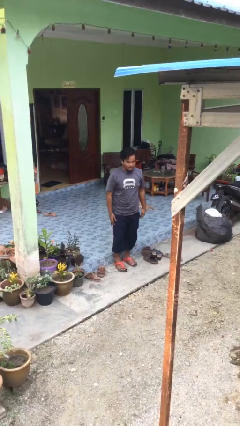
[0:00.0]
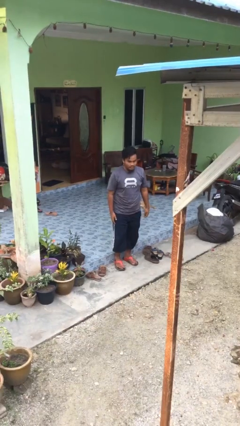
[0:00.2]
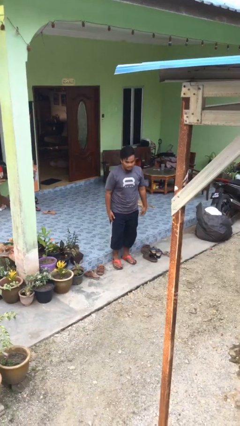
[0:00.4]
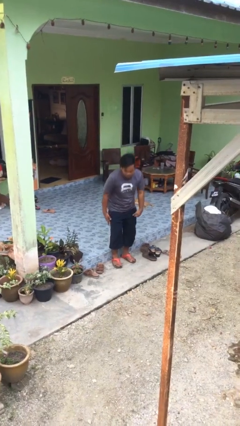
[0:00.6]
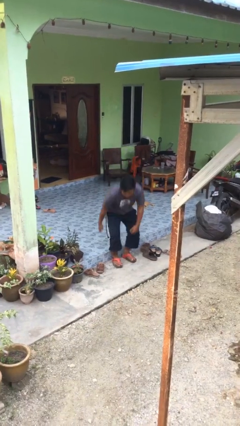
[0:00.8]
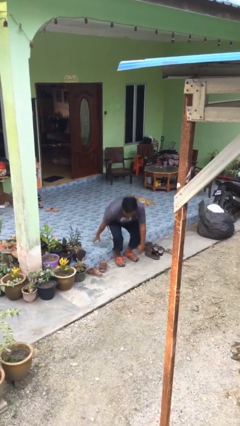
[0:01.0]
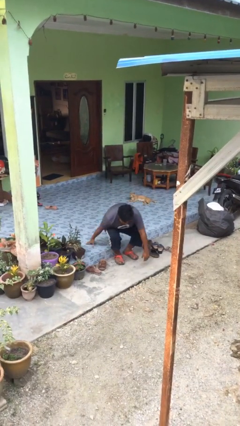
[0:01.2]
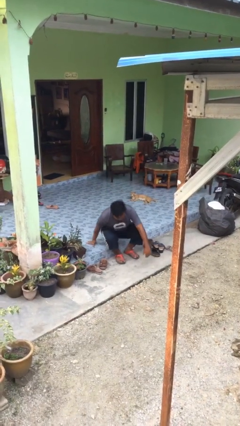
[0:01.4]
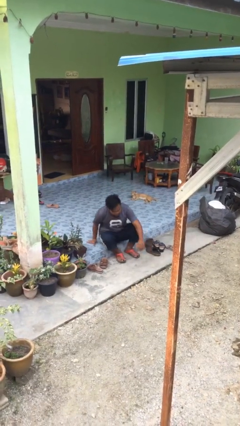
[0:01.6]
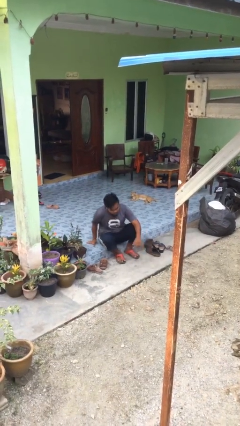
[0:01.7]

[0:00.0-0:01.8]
person sits down

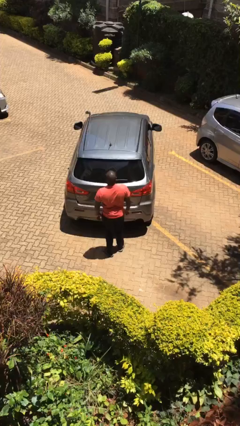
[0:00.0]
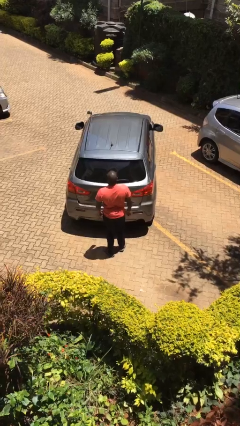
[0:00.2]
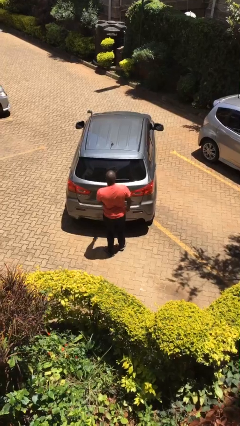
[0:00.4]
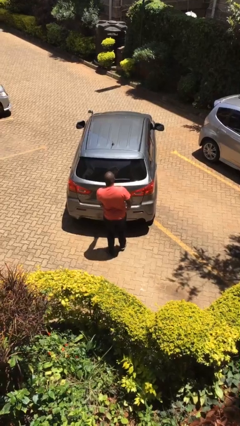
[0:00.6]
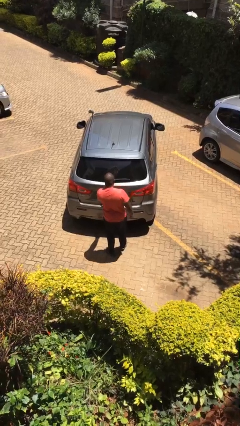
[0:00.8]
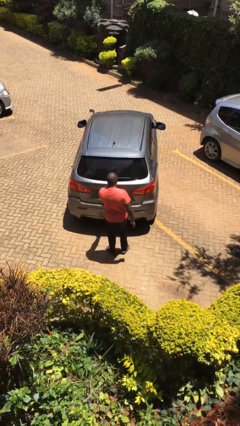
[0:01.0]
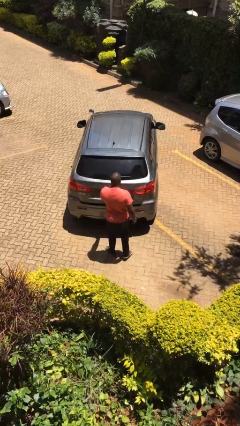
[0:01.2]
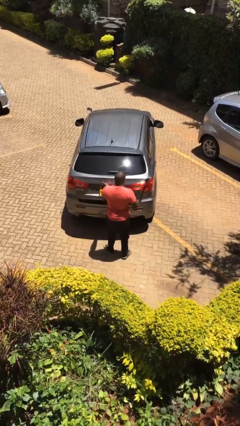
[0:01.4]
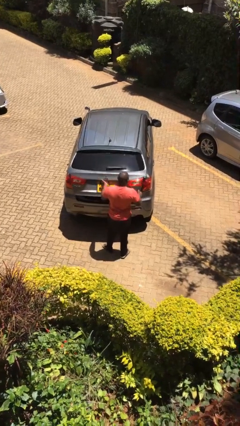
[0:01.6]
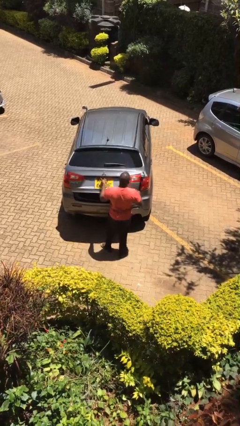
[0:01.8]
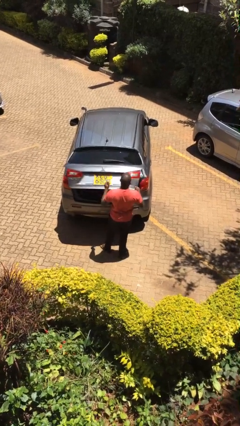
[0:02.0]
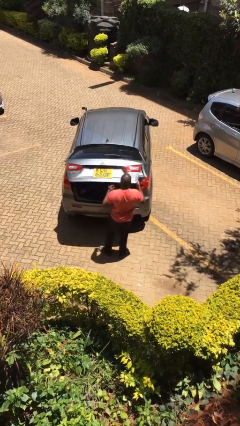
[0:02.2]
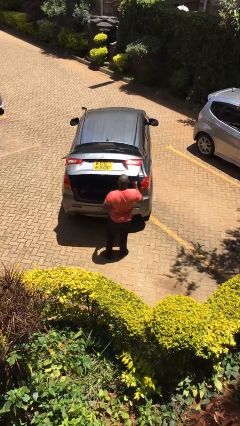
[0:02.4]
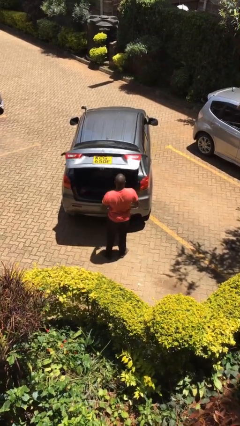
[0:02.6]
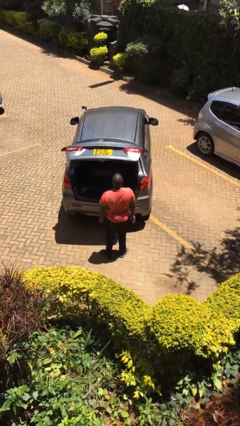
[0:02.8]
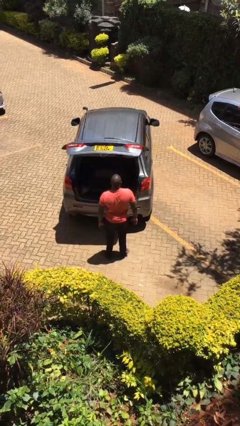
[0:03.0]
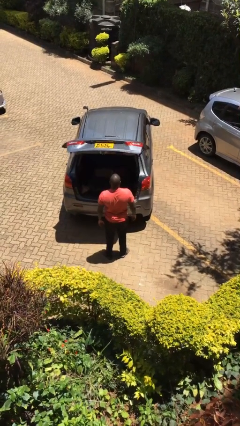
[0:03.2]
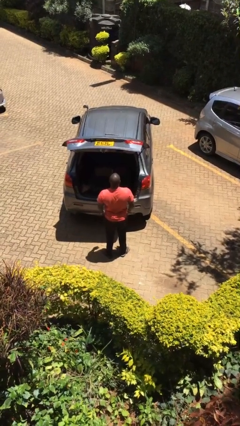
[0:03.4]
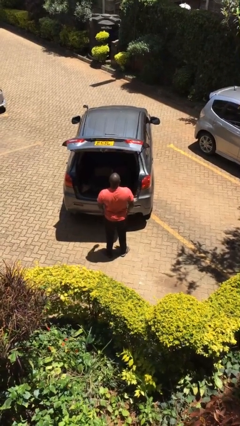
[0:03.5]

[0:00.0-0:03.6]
person opens car trunk

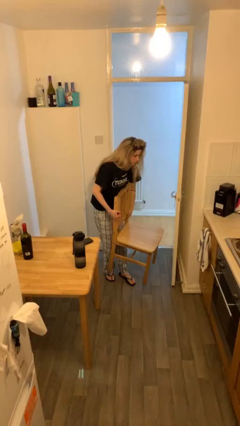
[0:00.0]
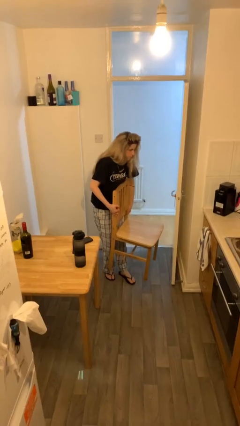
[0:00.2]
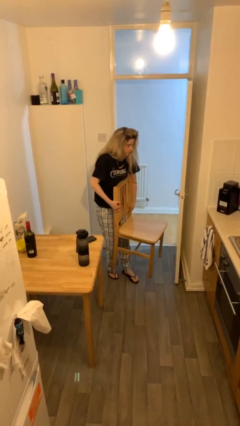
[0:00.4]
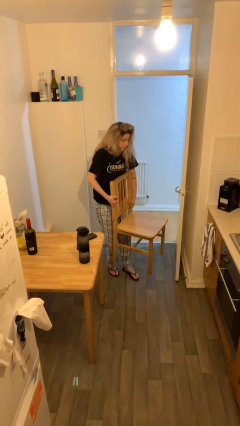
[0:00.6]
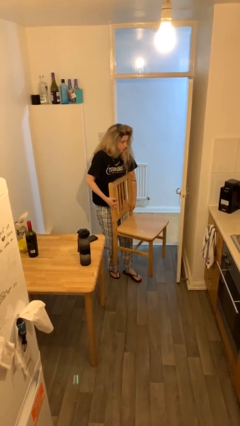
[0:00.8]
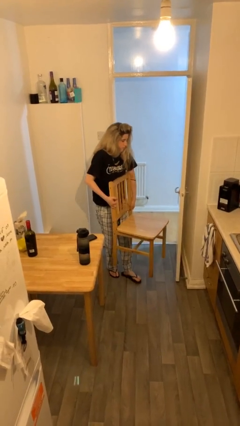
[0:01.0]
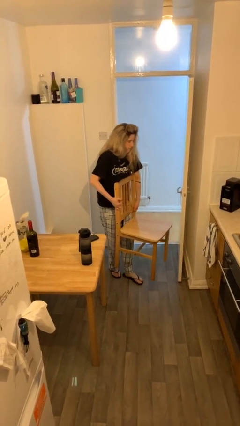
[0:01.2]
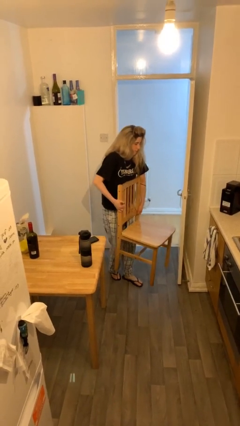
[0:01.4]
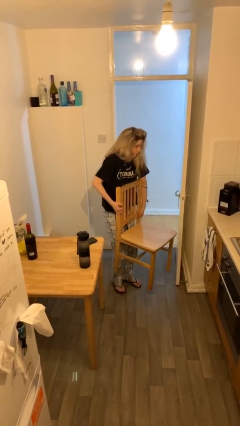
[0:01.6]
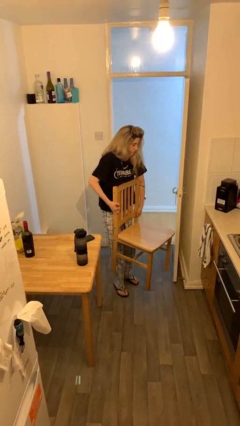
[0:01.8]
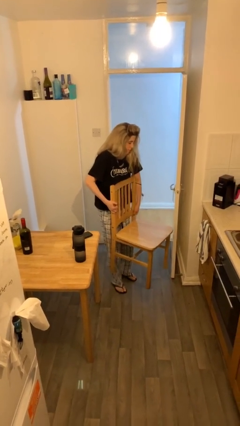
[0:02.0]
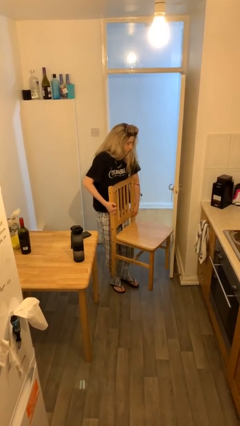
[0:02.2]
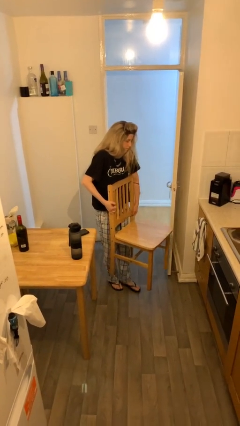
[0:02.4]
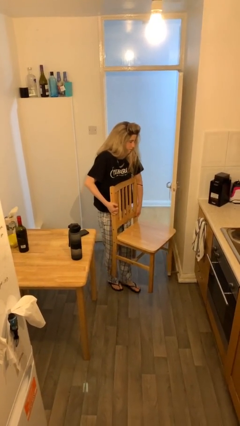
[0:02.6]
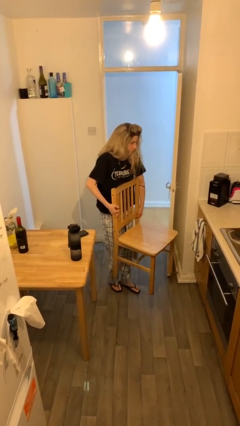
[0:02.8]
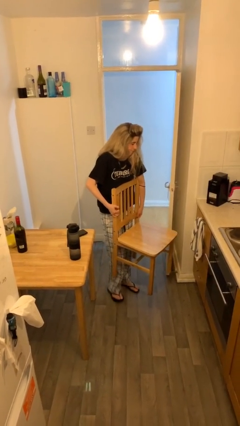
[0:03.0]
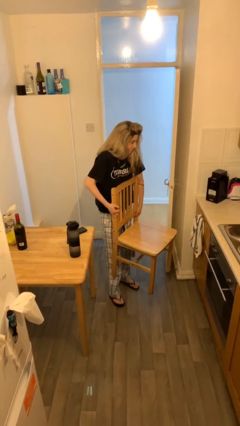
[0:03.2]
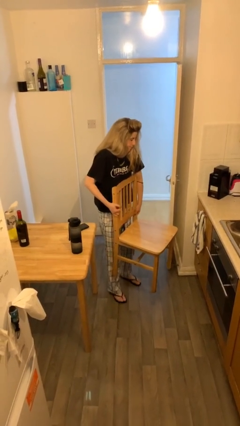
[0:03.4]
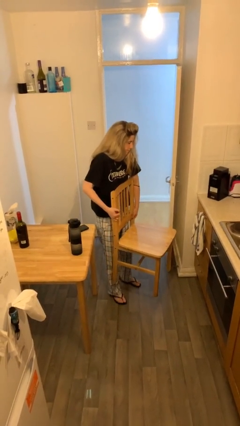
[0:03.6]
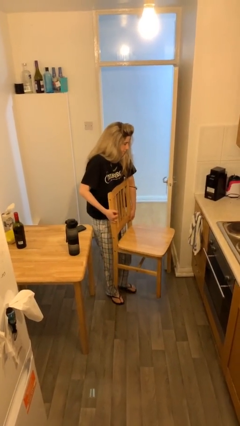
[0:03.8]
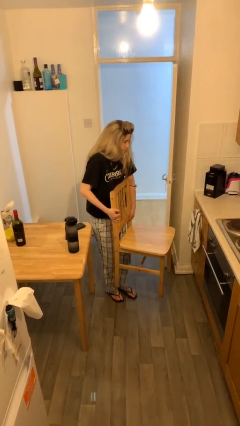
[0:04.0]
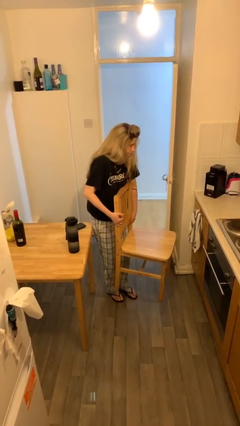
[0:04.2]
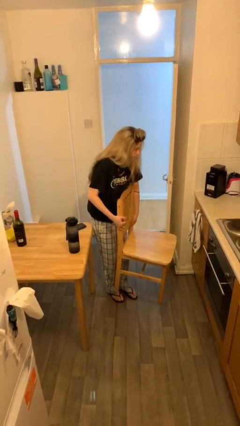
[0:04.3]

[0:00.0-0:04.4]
person carries heavy object

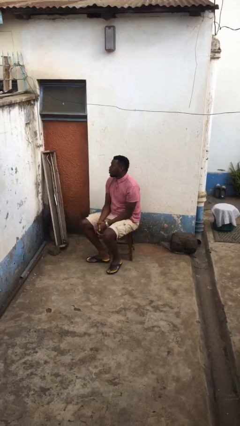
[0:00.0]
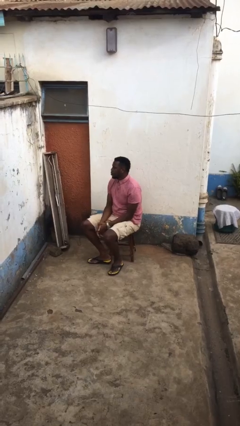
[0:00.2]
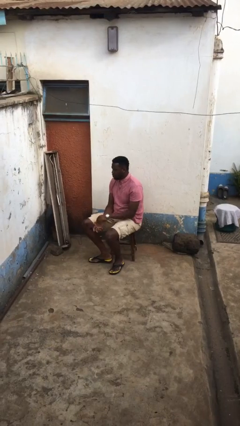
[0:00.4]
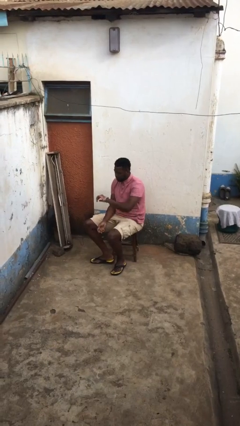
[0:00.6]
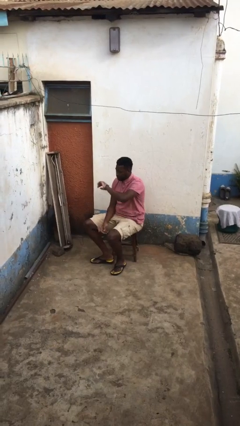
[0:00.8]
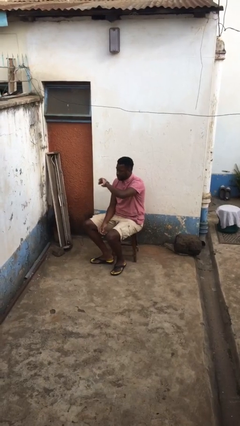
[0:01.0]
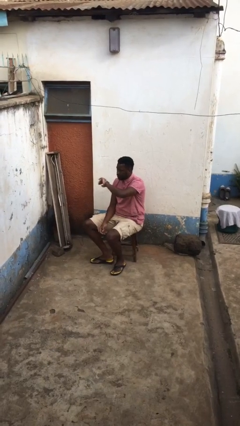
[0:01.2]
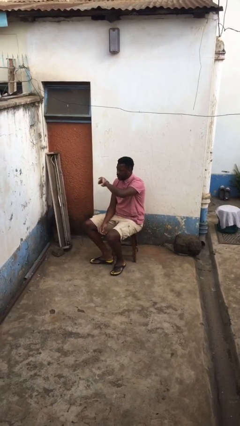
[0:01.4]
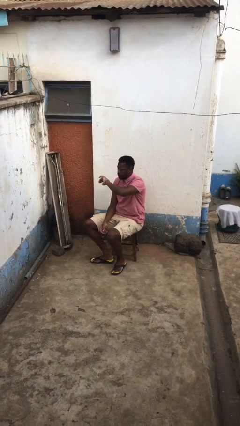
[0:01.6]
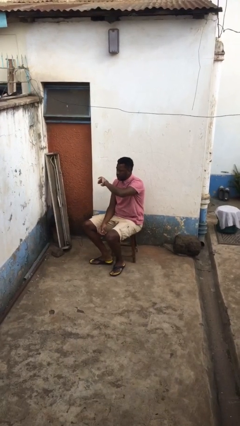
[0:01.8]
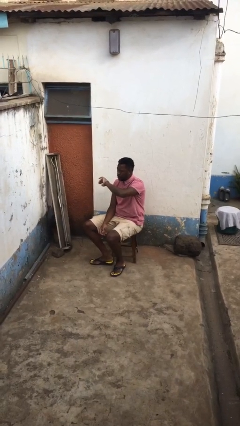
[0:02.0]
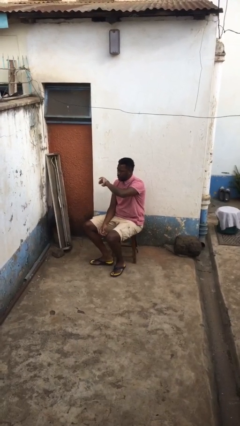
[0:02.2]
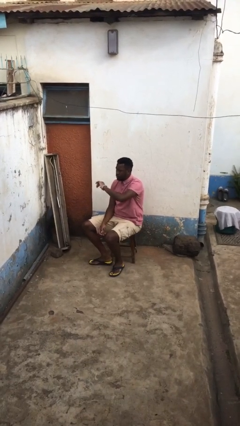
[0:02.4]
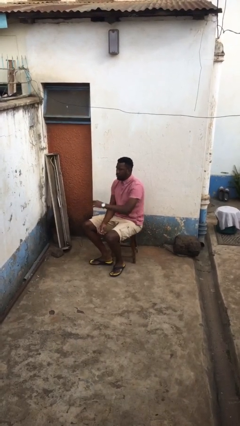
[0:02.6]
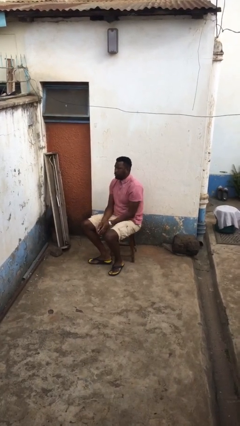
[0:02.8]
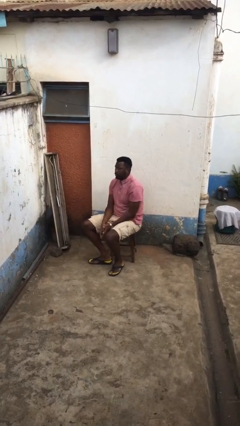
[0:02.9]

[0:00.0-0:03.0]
person looks at wristwatch

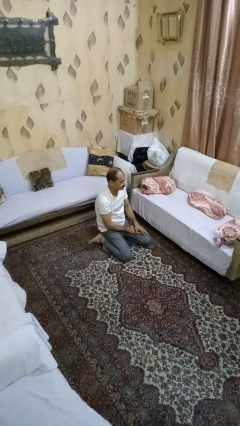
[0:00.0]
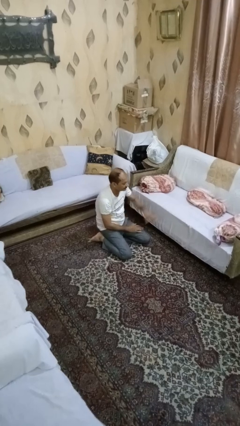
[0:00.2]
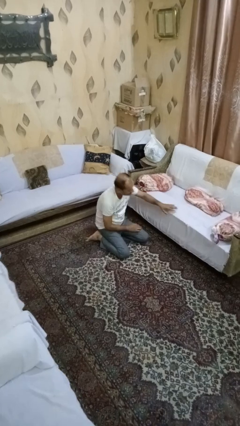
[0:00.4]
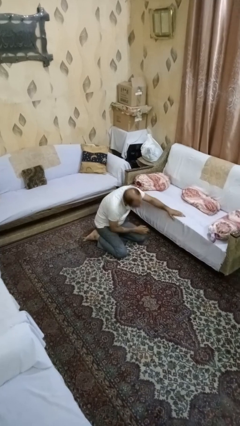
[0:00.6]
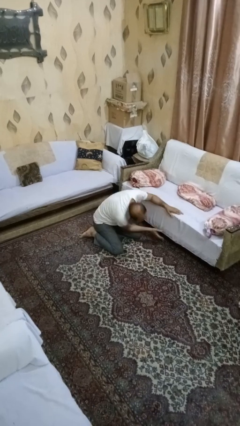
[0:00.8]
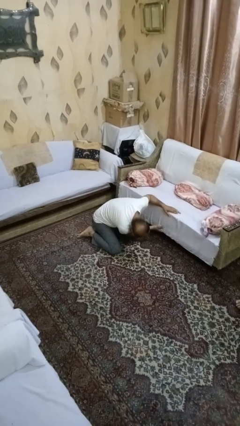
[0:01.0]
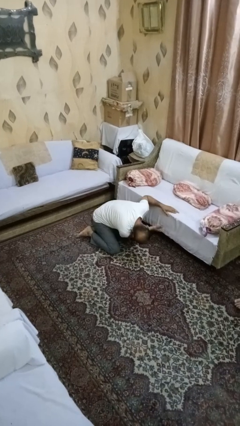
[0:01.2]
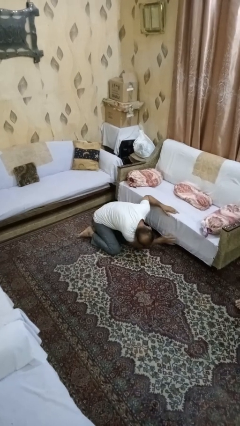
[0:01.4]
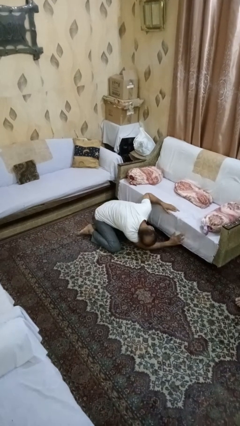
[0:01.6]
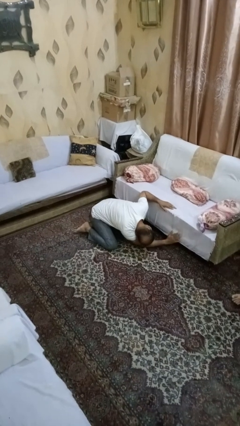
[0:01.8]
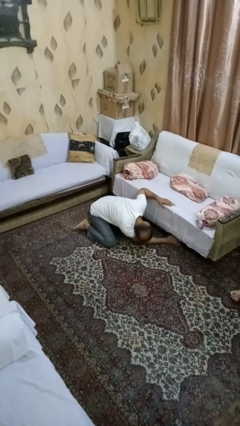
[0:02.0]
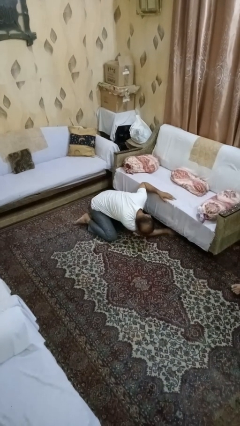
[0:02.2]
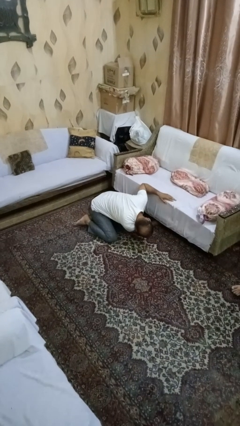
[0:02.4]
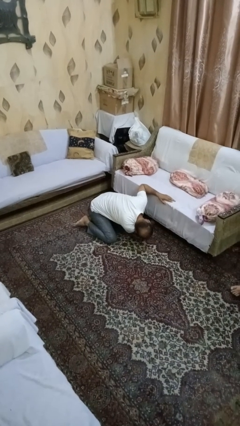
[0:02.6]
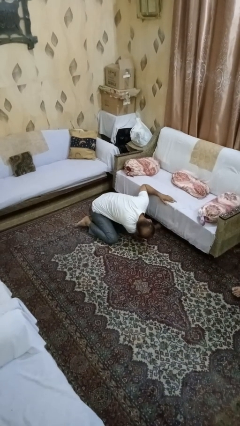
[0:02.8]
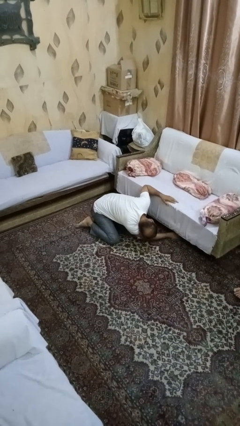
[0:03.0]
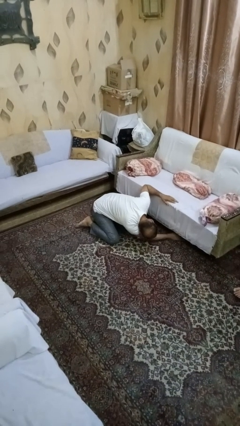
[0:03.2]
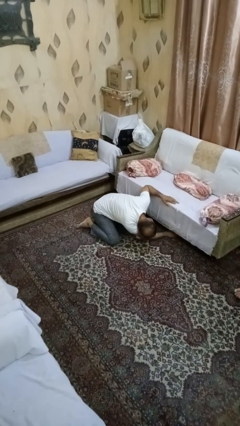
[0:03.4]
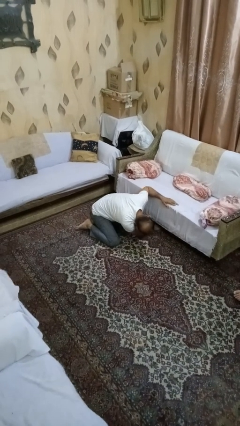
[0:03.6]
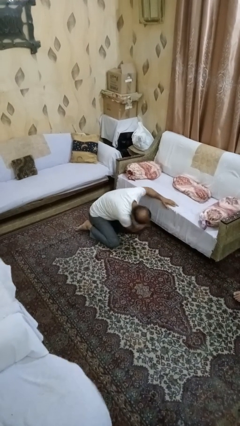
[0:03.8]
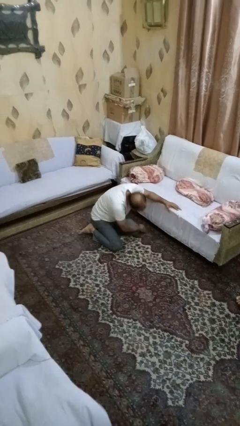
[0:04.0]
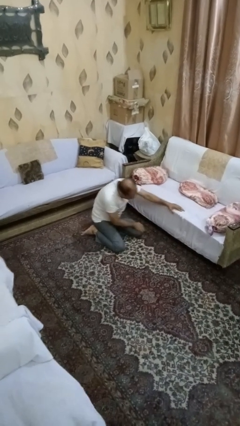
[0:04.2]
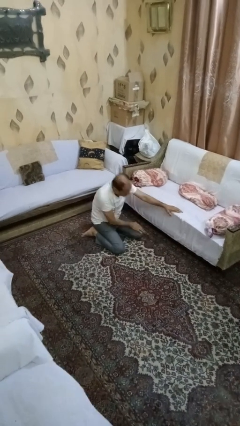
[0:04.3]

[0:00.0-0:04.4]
person searches under couch

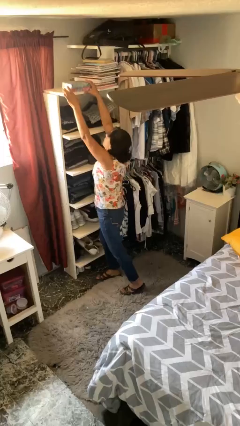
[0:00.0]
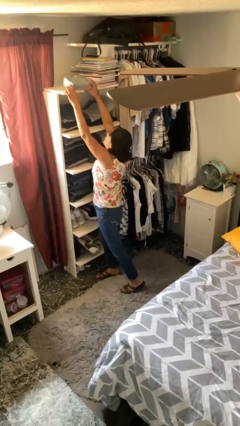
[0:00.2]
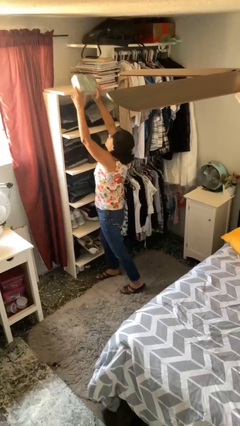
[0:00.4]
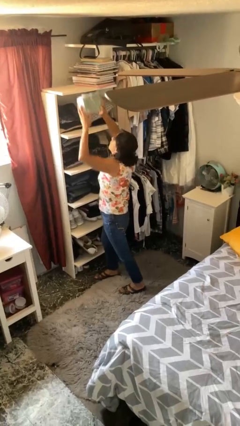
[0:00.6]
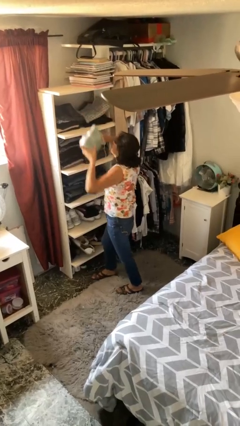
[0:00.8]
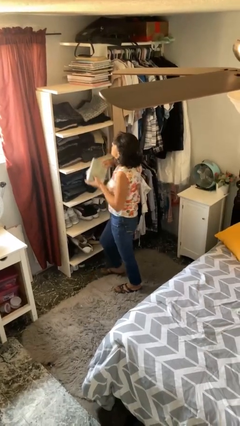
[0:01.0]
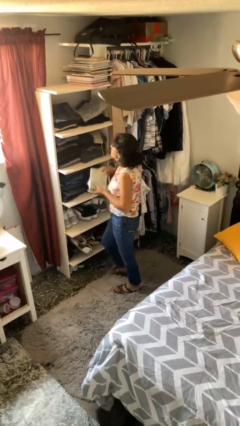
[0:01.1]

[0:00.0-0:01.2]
person picks up object from shelf
